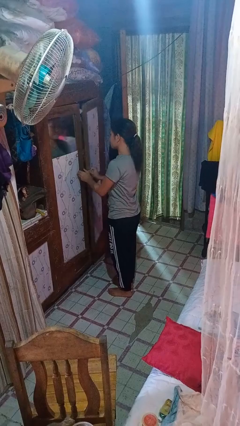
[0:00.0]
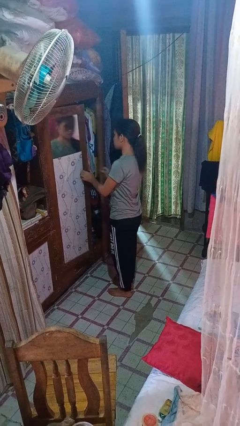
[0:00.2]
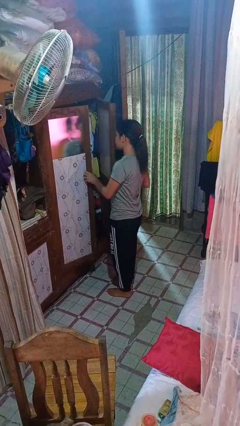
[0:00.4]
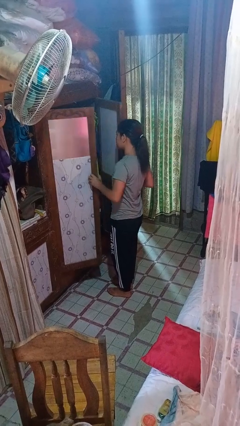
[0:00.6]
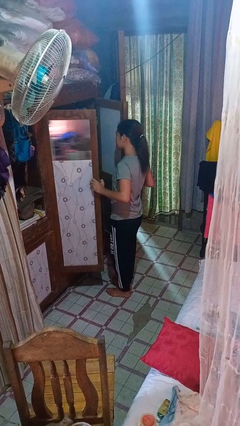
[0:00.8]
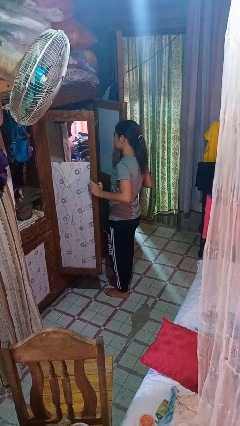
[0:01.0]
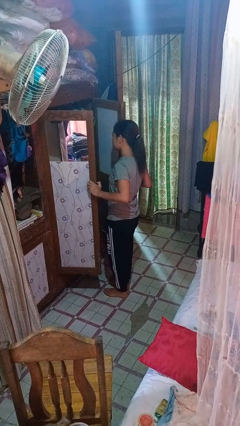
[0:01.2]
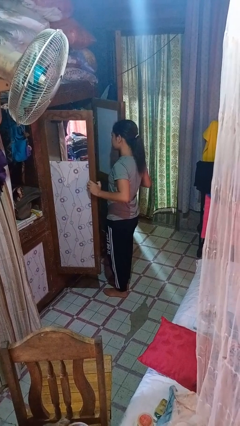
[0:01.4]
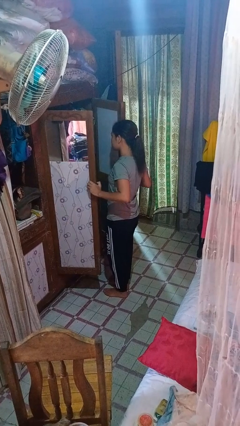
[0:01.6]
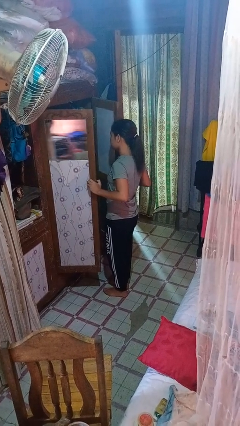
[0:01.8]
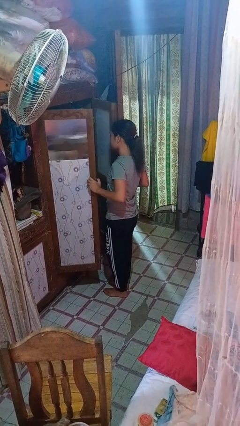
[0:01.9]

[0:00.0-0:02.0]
person opens closet door

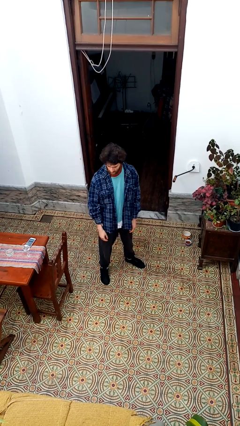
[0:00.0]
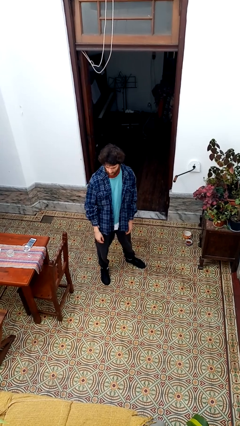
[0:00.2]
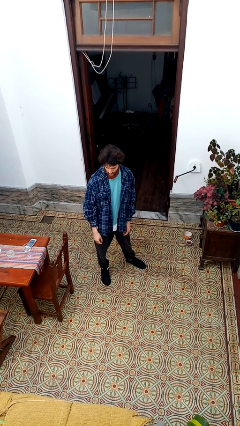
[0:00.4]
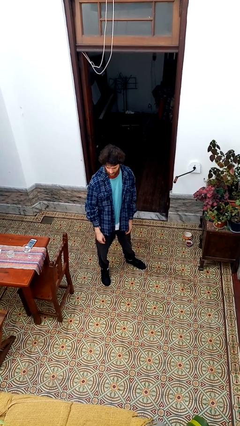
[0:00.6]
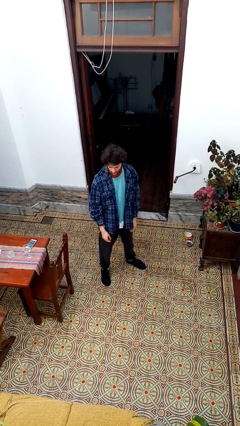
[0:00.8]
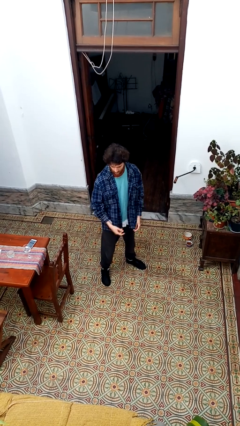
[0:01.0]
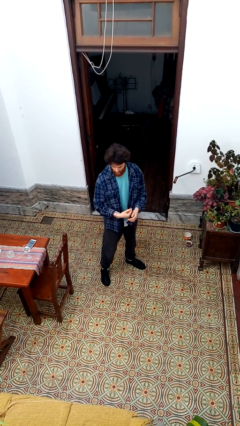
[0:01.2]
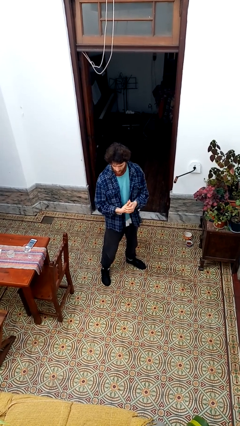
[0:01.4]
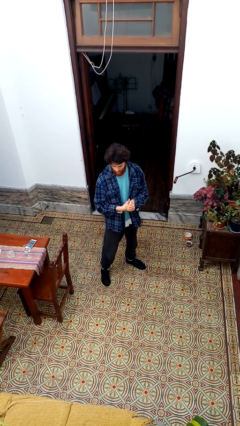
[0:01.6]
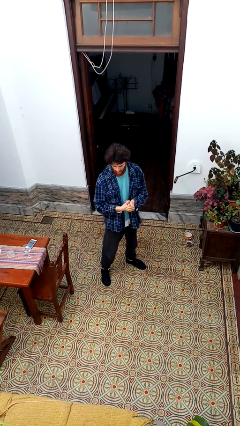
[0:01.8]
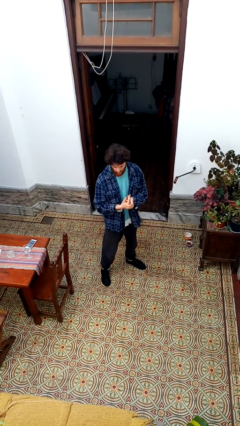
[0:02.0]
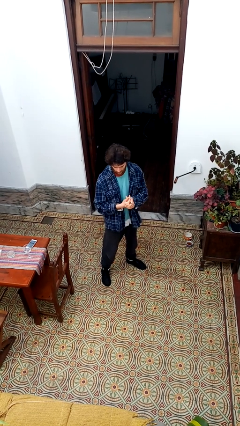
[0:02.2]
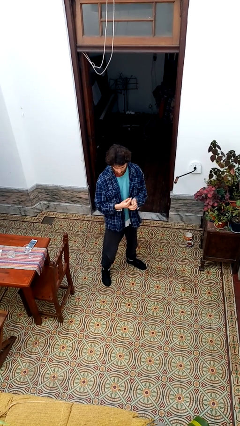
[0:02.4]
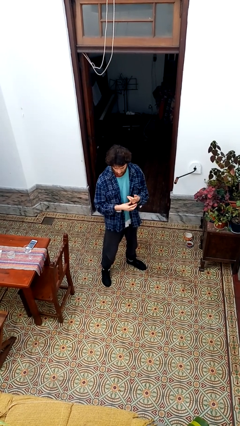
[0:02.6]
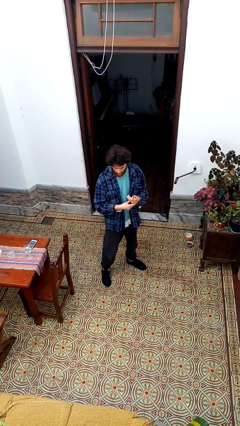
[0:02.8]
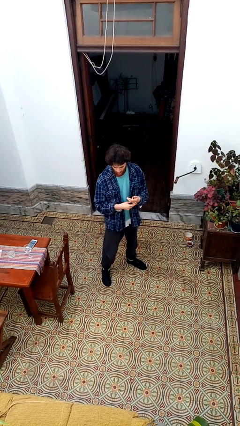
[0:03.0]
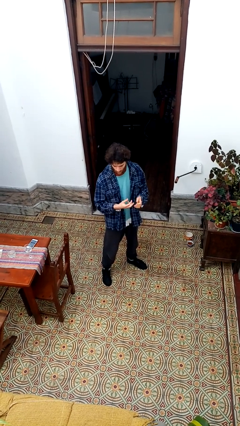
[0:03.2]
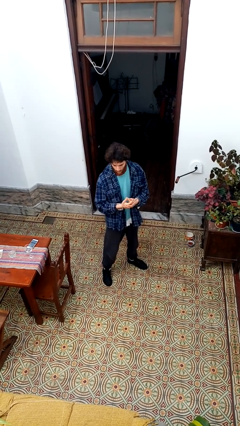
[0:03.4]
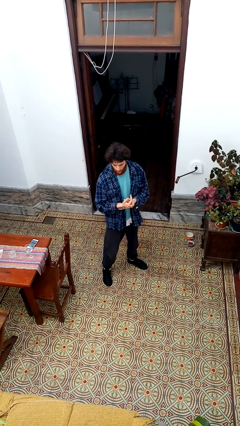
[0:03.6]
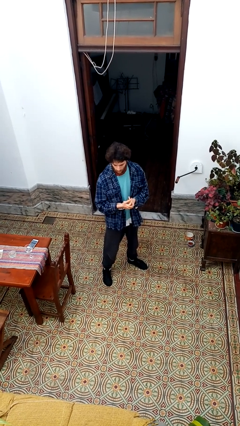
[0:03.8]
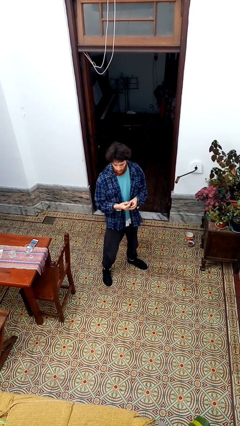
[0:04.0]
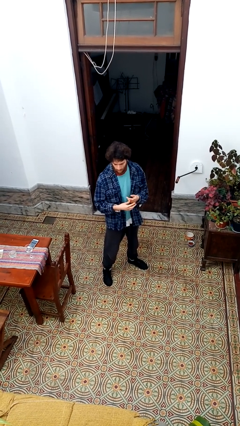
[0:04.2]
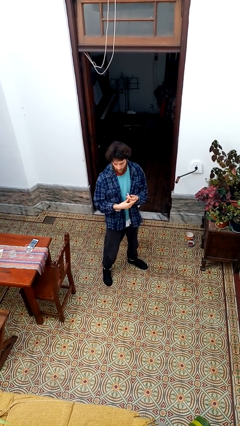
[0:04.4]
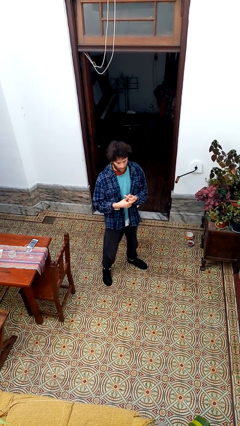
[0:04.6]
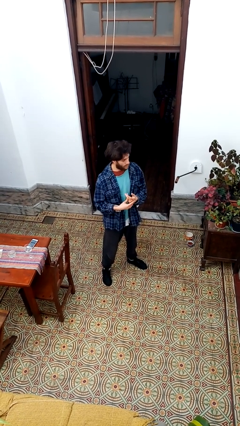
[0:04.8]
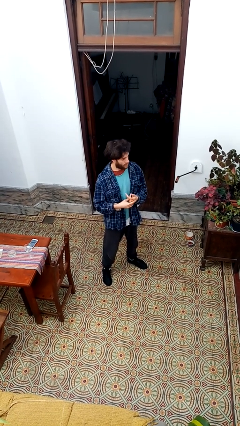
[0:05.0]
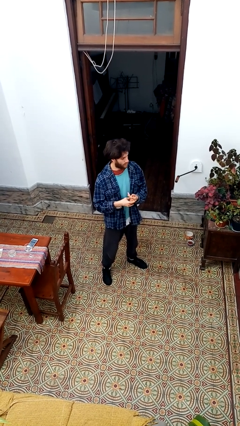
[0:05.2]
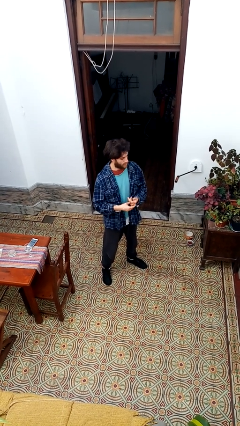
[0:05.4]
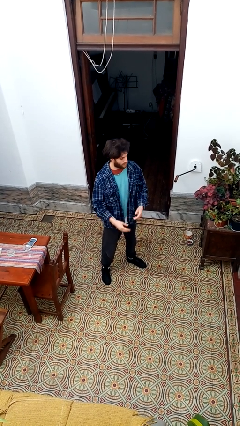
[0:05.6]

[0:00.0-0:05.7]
person cracks knuckles

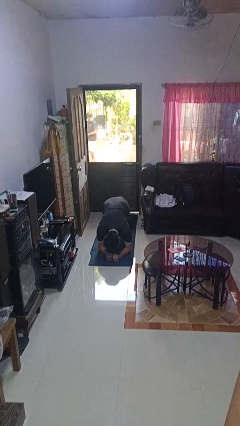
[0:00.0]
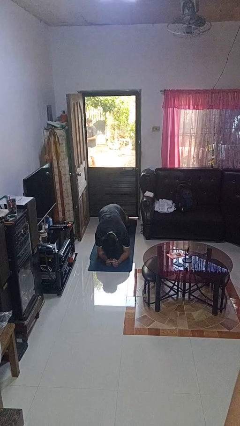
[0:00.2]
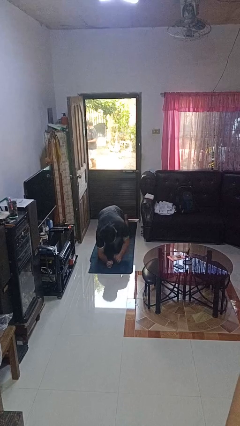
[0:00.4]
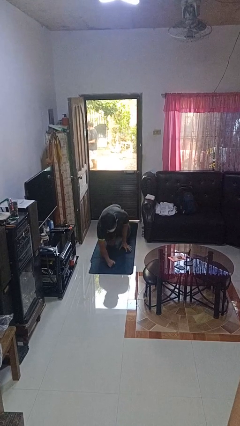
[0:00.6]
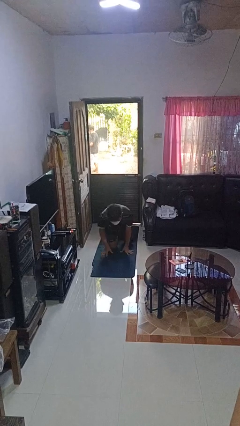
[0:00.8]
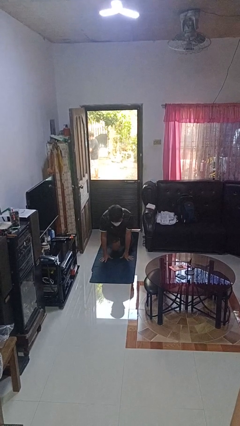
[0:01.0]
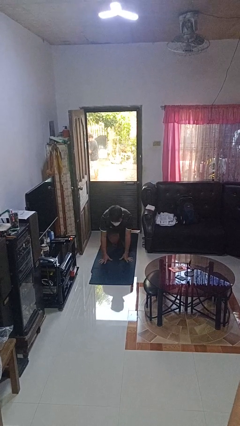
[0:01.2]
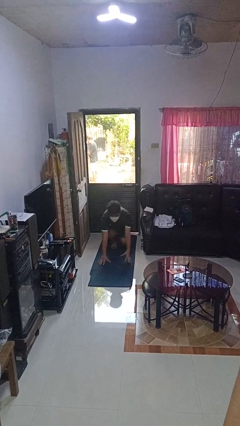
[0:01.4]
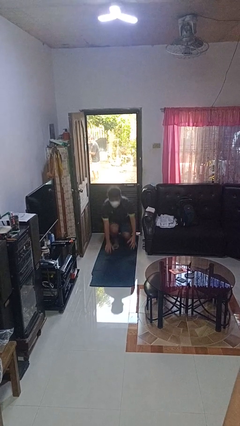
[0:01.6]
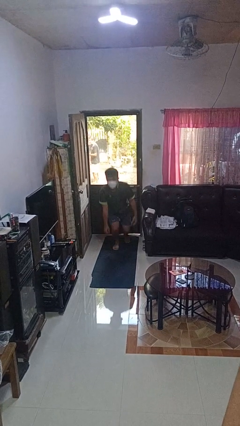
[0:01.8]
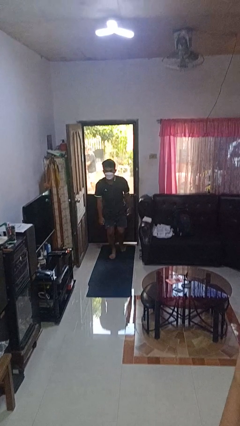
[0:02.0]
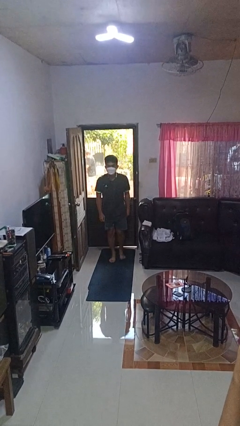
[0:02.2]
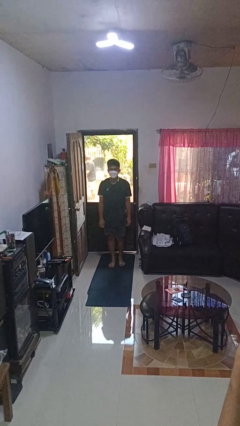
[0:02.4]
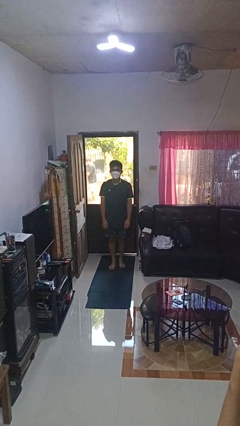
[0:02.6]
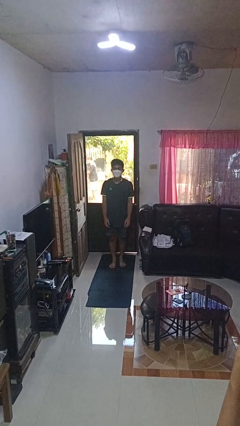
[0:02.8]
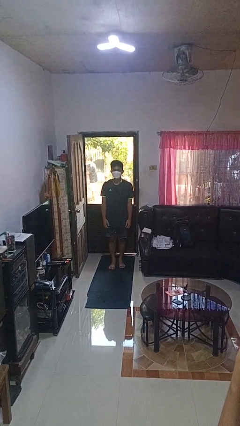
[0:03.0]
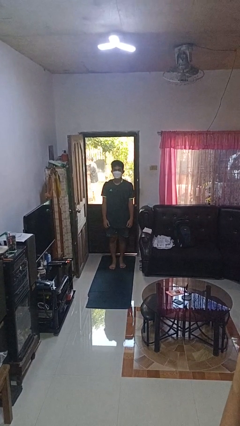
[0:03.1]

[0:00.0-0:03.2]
person stands up from floor

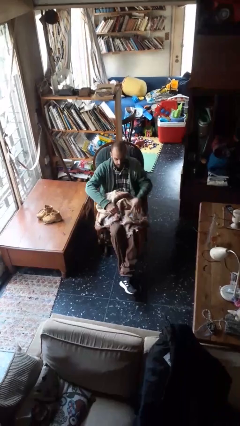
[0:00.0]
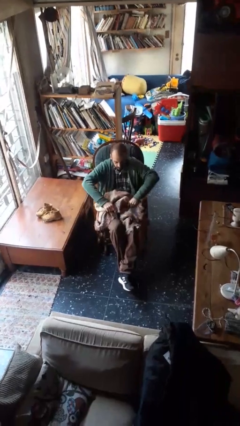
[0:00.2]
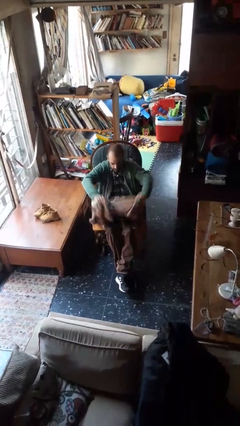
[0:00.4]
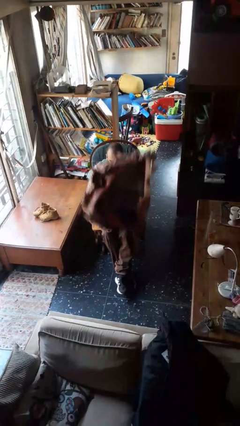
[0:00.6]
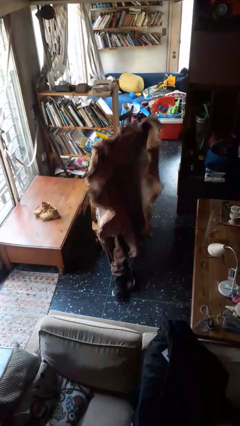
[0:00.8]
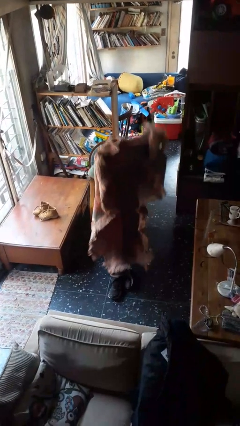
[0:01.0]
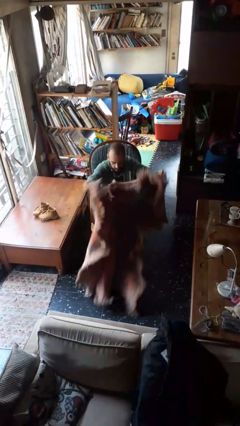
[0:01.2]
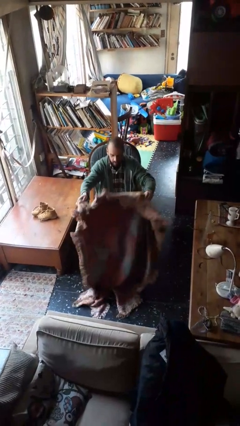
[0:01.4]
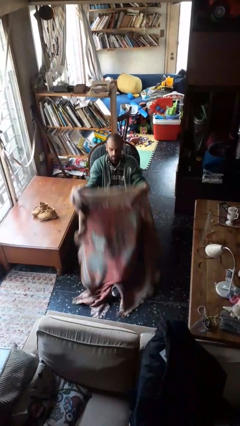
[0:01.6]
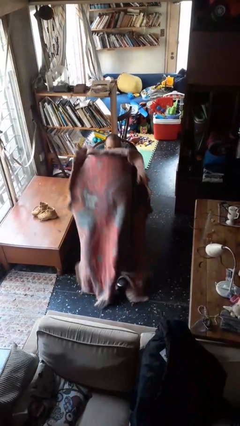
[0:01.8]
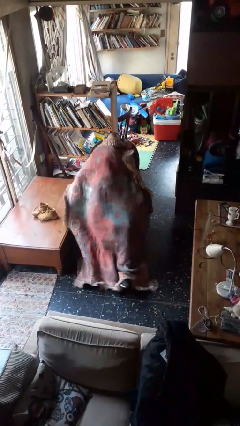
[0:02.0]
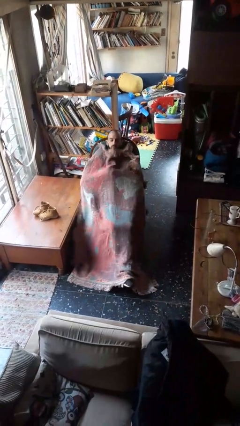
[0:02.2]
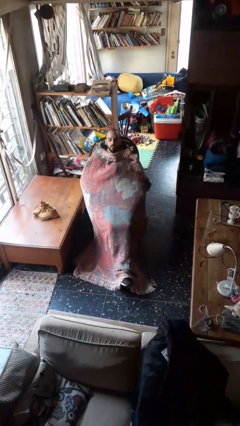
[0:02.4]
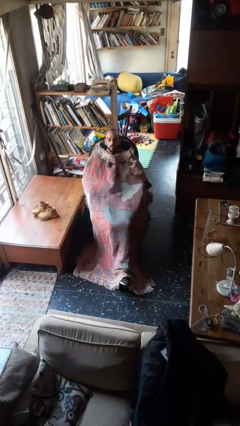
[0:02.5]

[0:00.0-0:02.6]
person covers with blanket

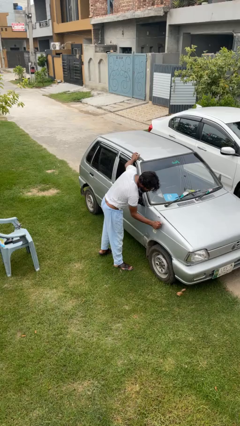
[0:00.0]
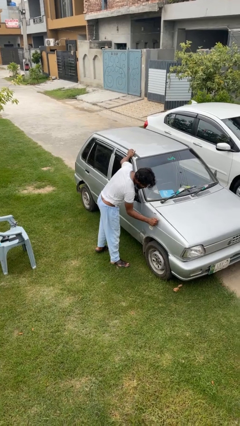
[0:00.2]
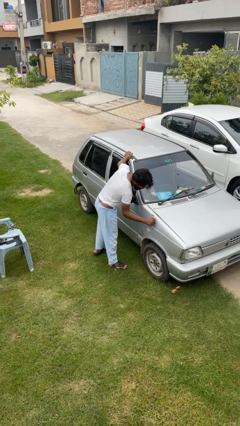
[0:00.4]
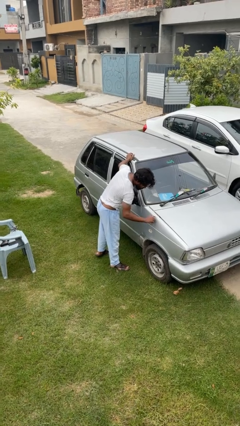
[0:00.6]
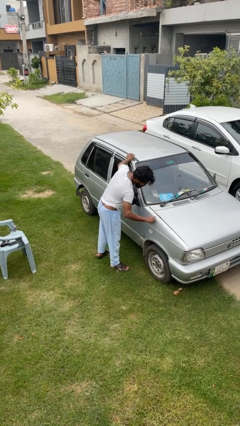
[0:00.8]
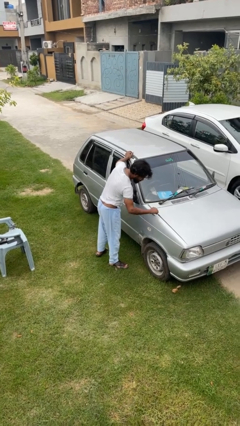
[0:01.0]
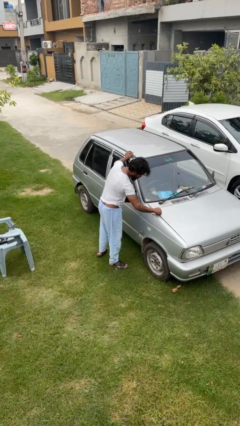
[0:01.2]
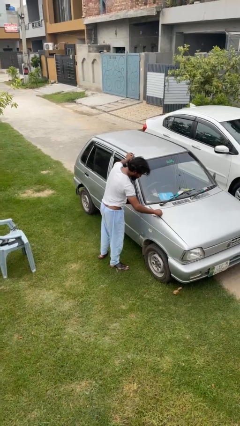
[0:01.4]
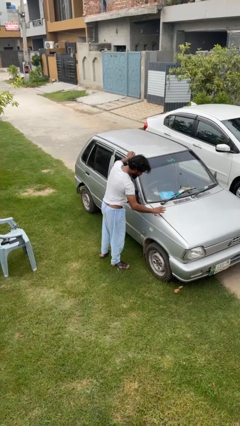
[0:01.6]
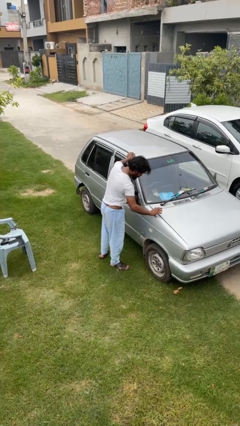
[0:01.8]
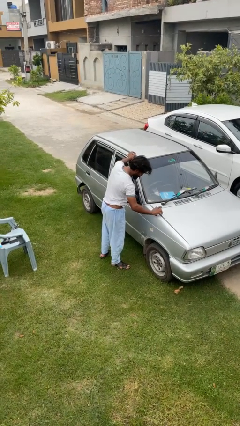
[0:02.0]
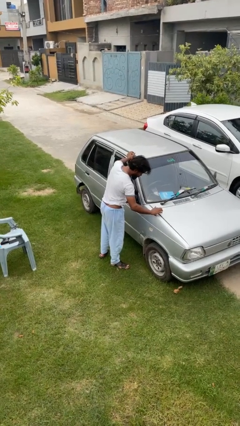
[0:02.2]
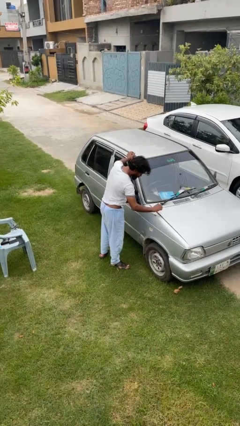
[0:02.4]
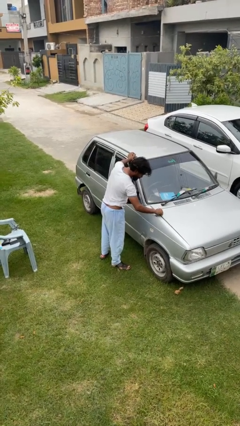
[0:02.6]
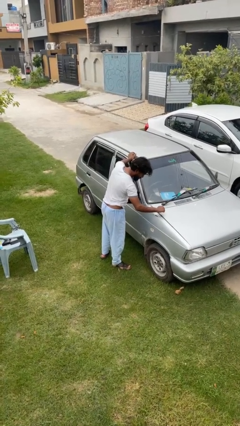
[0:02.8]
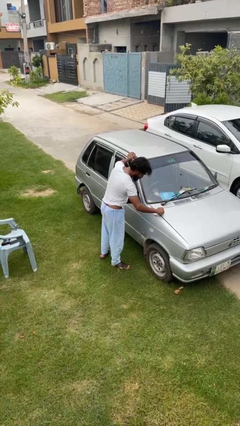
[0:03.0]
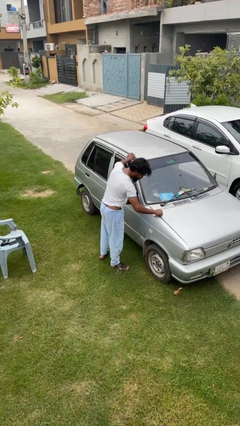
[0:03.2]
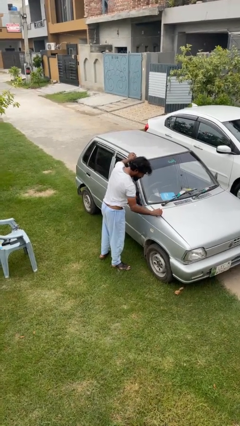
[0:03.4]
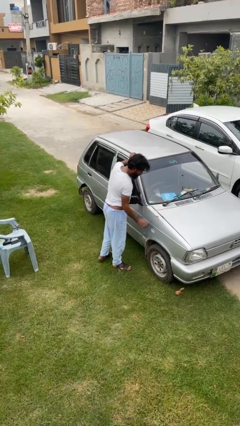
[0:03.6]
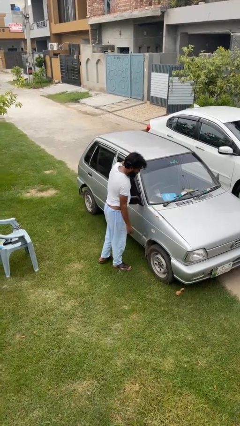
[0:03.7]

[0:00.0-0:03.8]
person taps object with finger

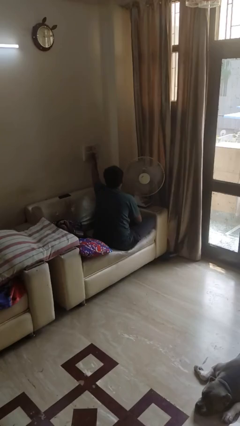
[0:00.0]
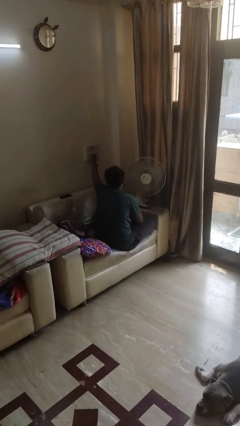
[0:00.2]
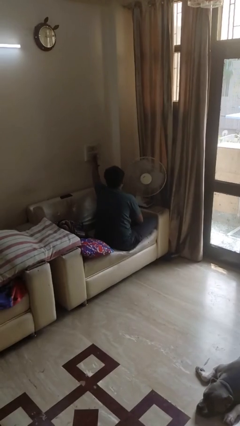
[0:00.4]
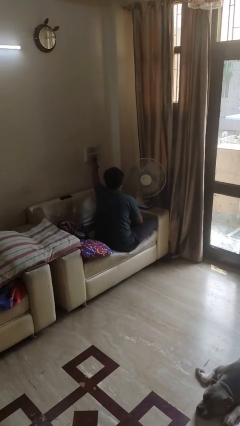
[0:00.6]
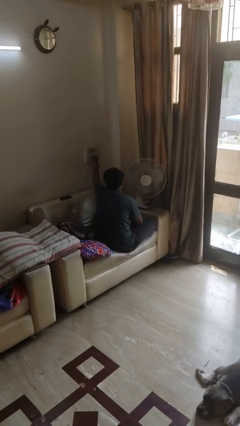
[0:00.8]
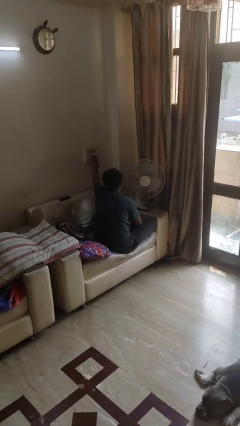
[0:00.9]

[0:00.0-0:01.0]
person turns on fan
